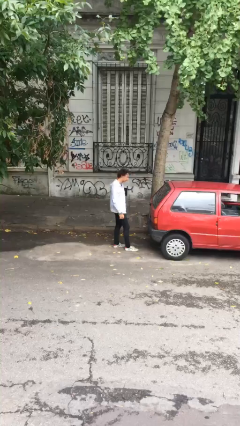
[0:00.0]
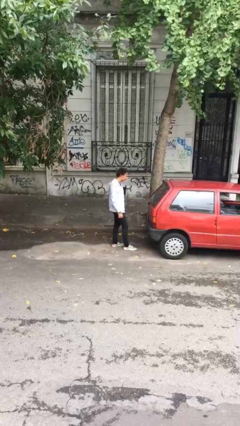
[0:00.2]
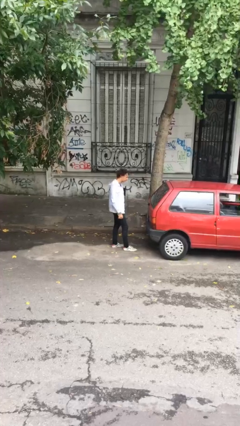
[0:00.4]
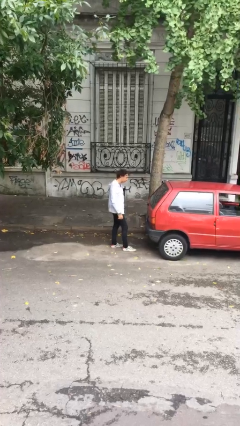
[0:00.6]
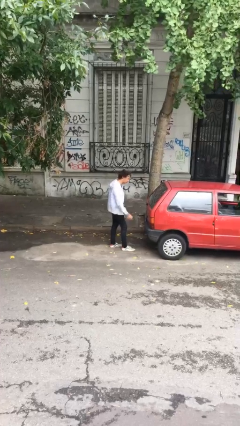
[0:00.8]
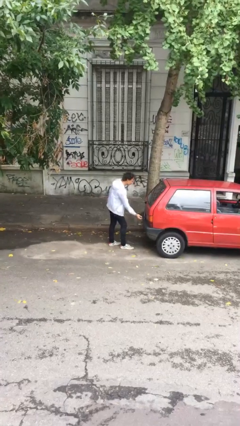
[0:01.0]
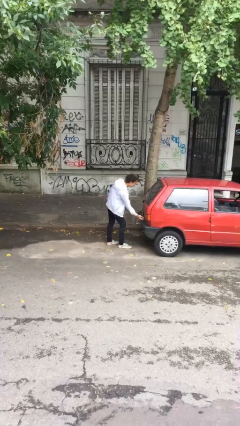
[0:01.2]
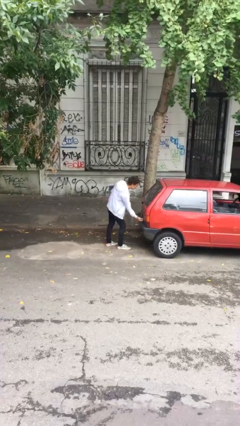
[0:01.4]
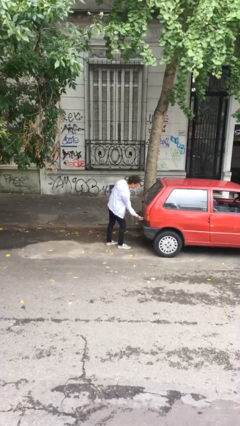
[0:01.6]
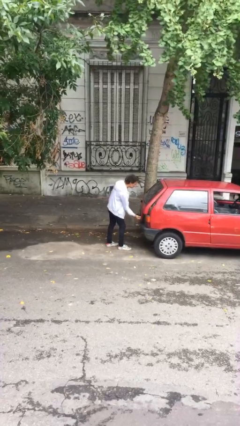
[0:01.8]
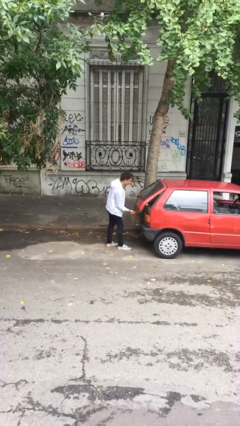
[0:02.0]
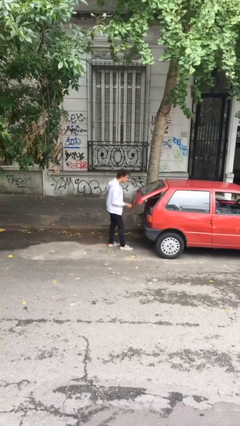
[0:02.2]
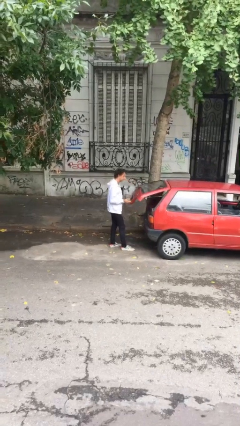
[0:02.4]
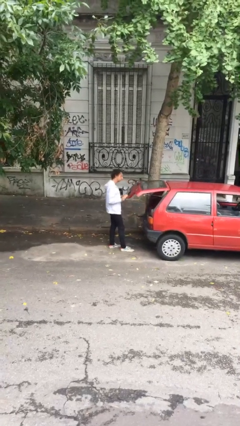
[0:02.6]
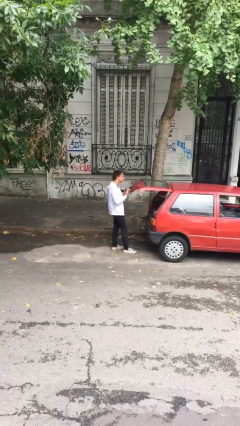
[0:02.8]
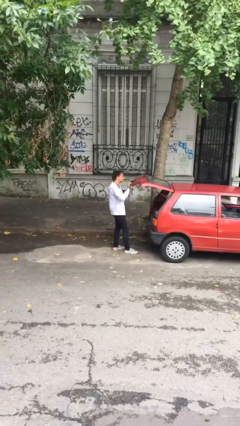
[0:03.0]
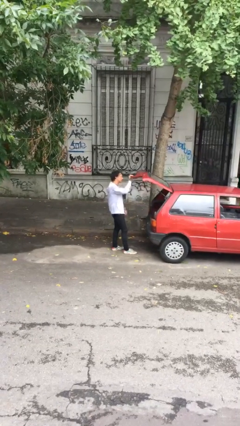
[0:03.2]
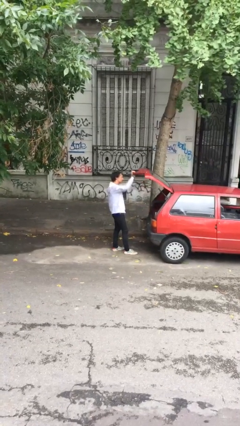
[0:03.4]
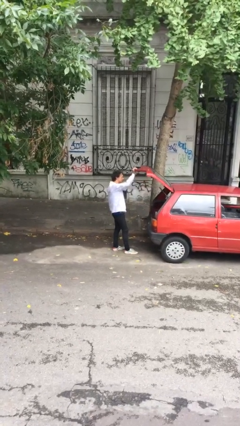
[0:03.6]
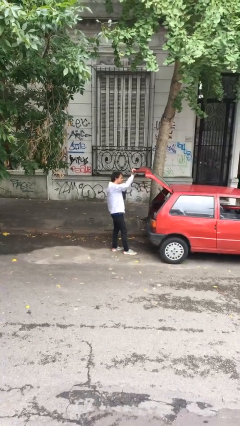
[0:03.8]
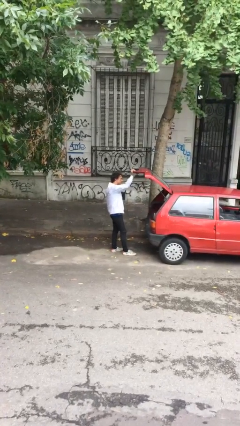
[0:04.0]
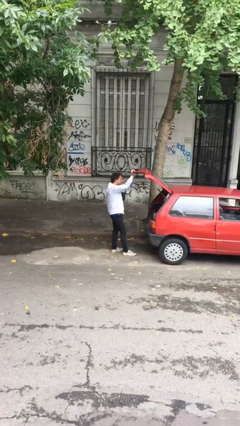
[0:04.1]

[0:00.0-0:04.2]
person opens car trunk

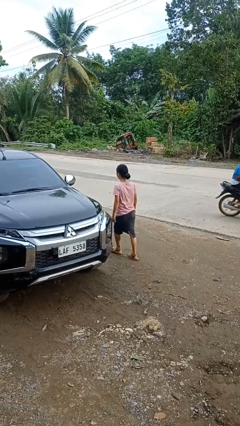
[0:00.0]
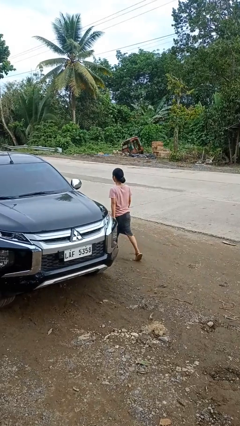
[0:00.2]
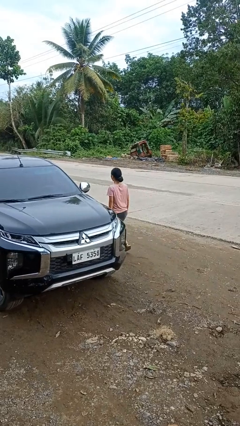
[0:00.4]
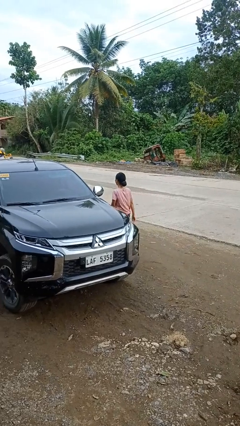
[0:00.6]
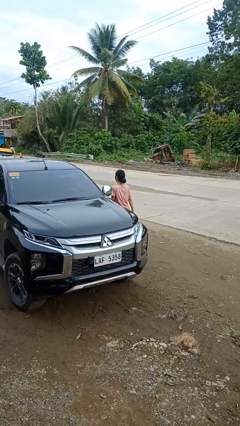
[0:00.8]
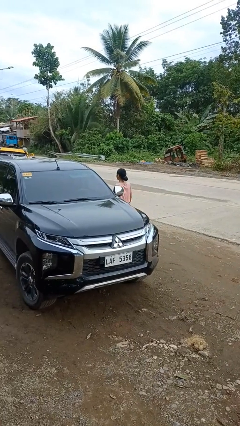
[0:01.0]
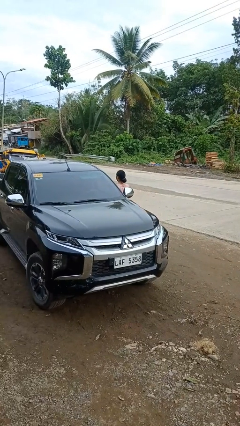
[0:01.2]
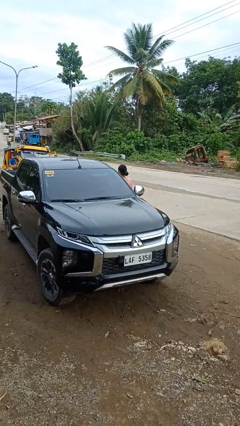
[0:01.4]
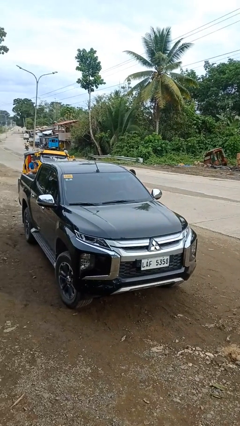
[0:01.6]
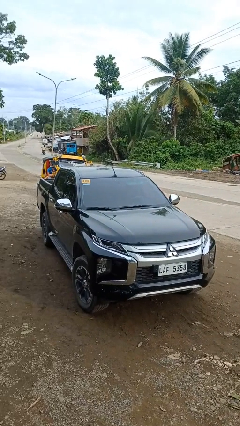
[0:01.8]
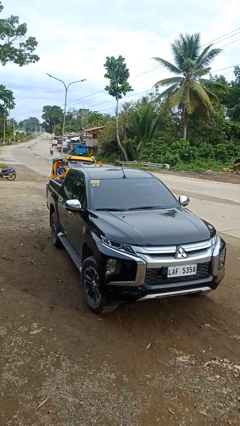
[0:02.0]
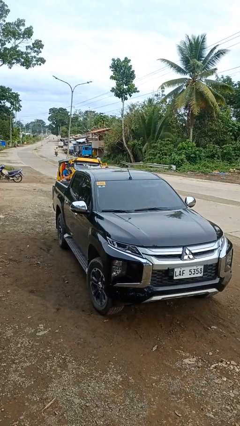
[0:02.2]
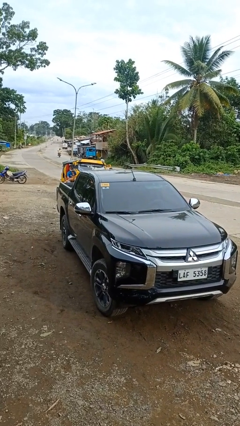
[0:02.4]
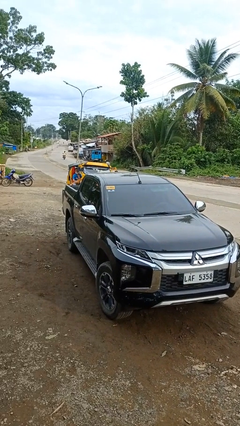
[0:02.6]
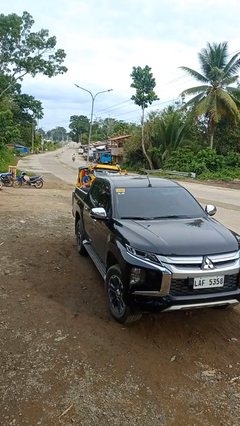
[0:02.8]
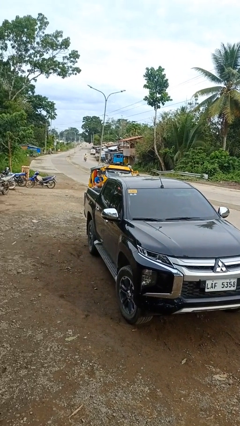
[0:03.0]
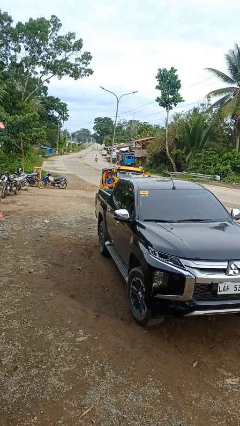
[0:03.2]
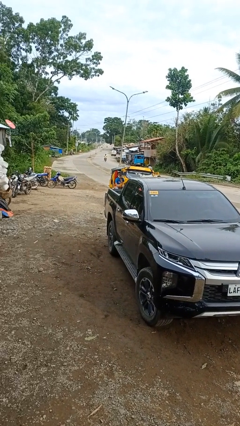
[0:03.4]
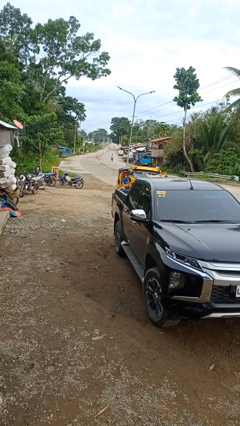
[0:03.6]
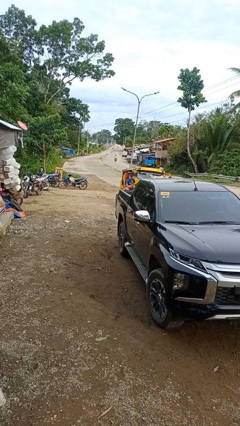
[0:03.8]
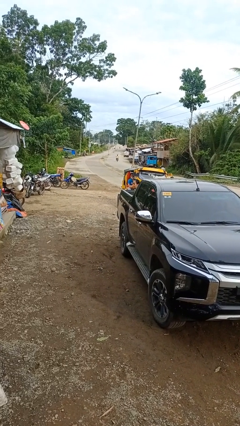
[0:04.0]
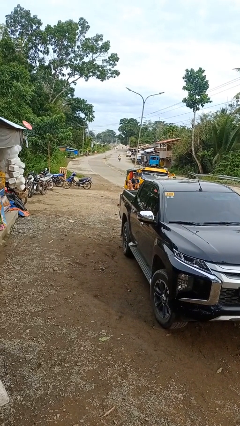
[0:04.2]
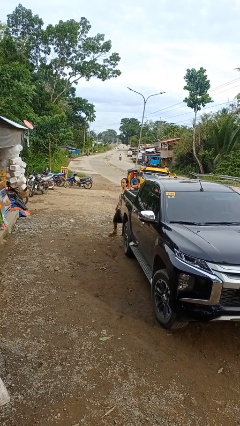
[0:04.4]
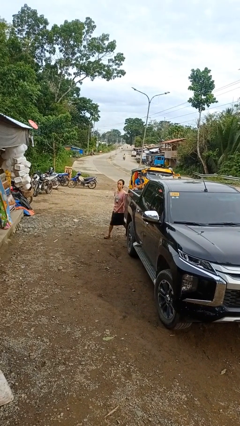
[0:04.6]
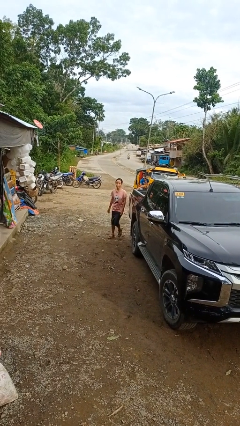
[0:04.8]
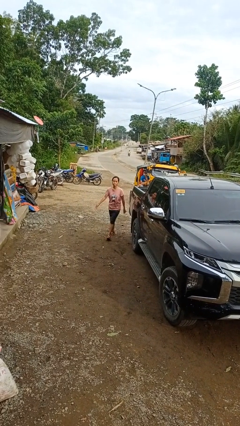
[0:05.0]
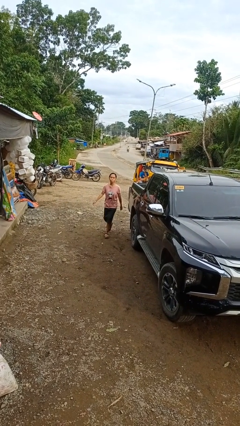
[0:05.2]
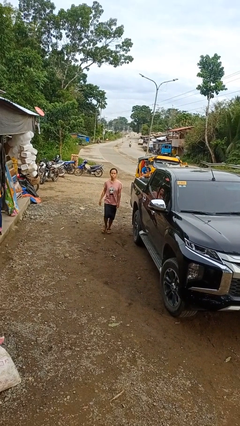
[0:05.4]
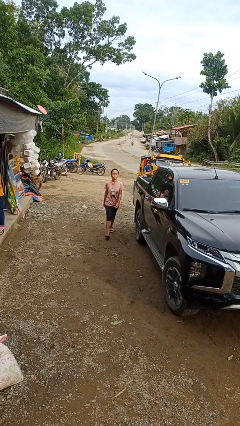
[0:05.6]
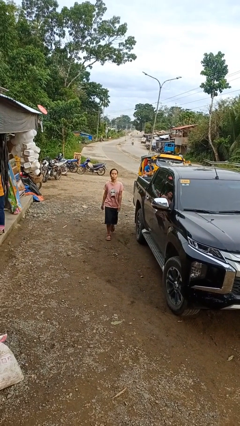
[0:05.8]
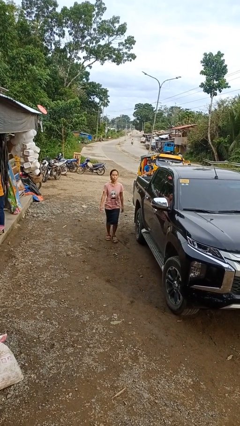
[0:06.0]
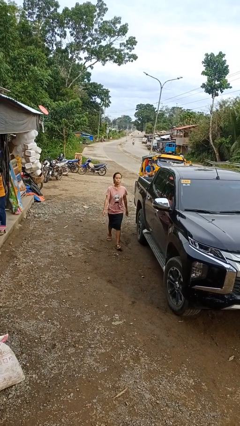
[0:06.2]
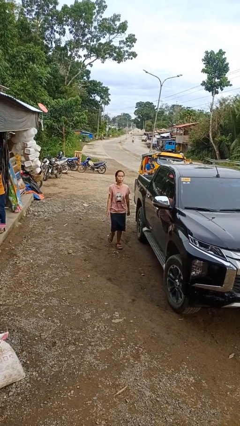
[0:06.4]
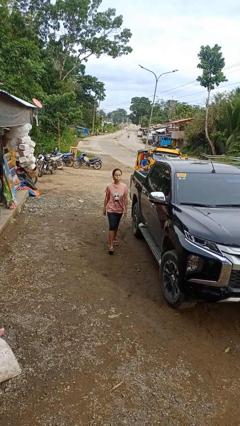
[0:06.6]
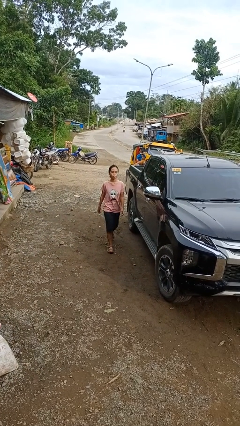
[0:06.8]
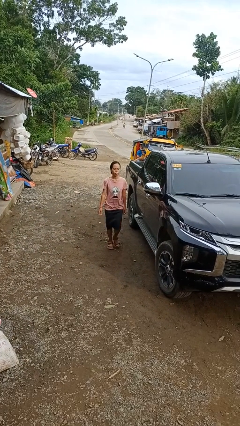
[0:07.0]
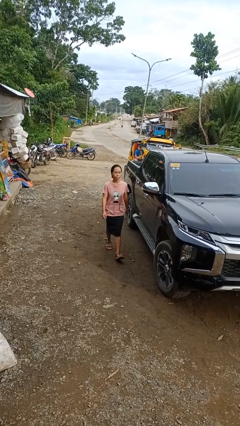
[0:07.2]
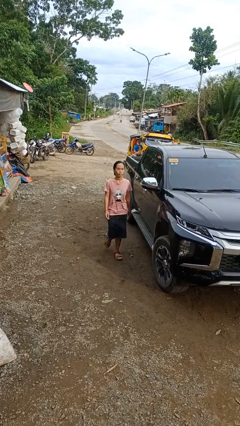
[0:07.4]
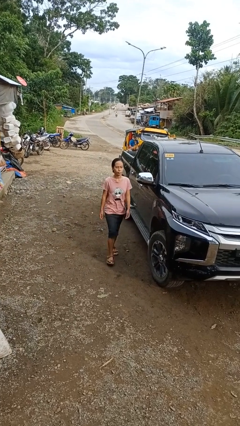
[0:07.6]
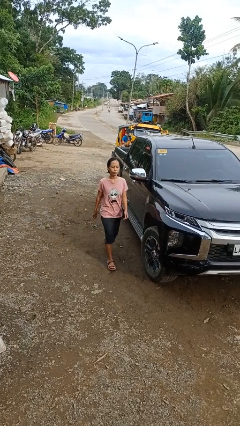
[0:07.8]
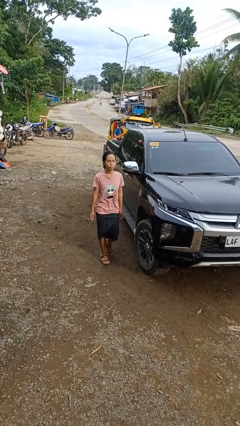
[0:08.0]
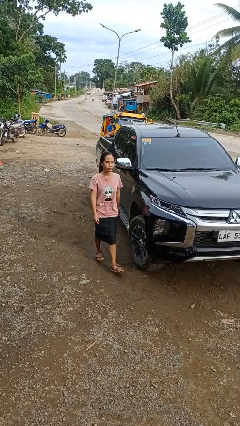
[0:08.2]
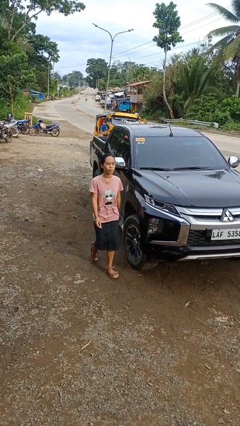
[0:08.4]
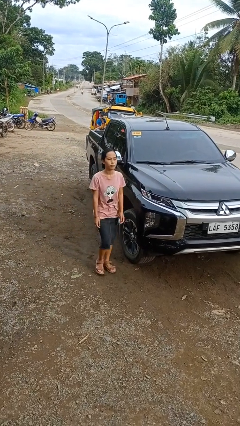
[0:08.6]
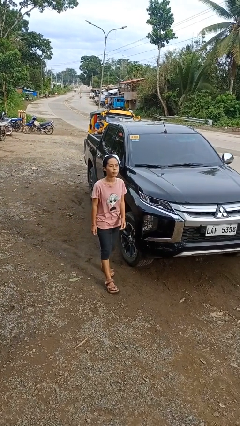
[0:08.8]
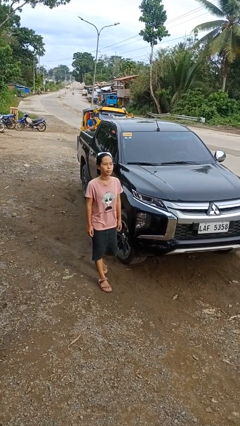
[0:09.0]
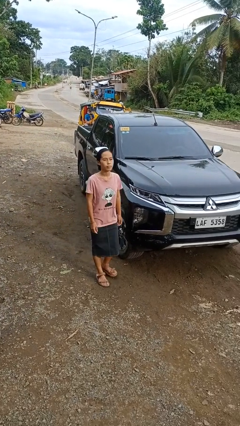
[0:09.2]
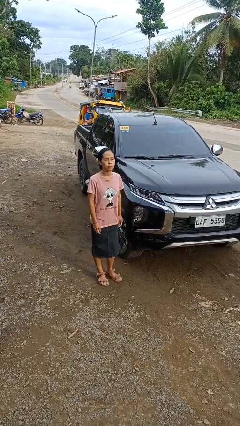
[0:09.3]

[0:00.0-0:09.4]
person walks around car

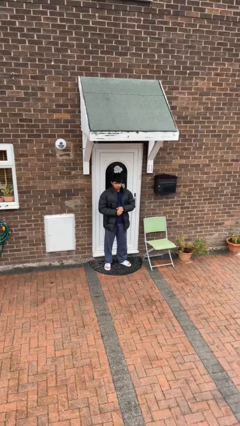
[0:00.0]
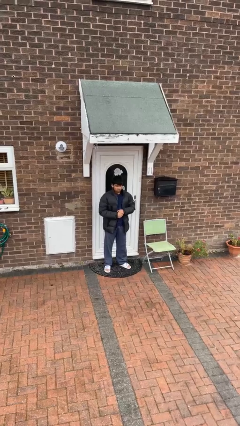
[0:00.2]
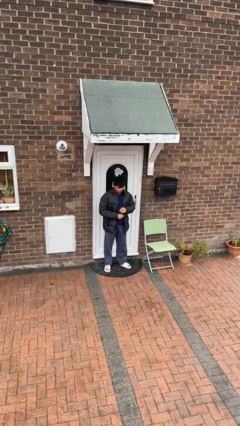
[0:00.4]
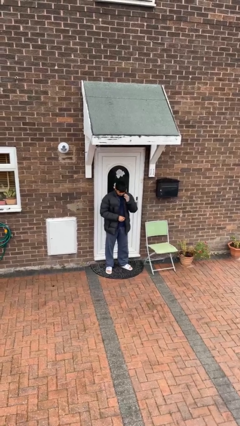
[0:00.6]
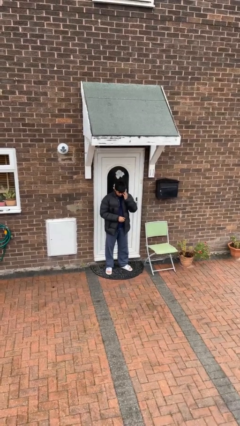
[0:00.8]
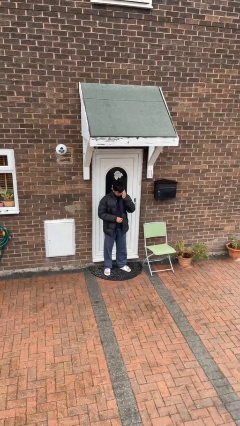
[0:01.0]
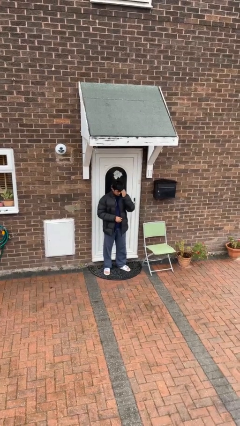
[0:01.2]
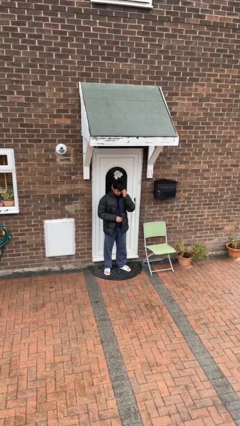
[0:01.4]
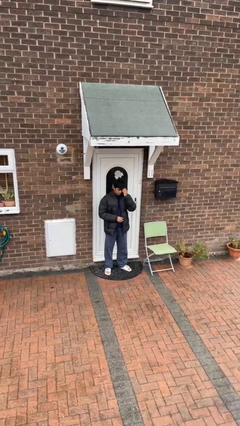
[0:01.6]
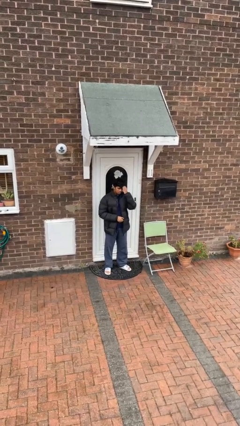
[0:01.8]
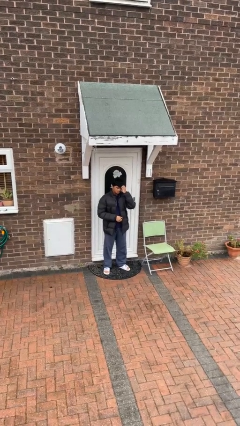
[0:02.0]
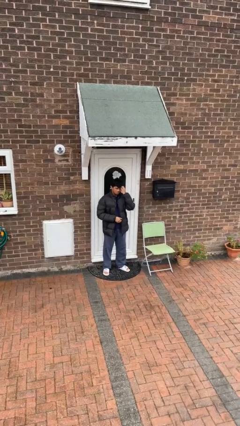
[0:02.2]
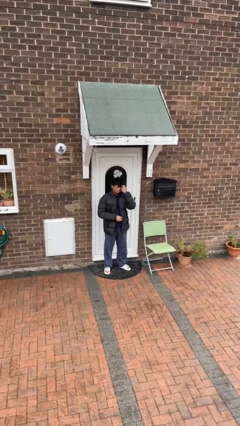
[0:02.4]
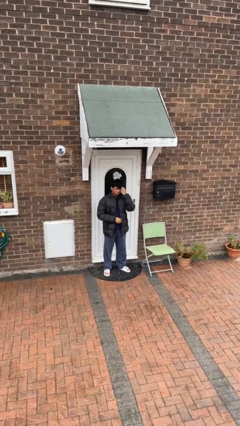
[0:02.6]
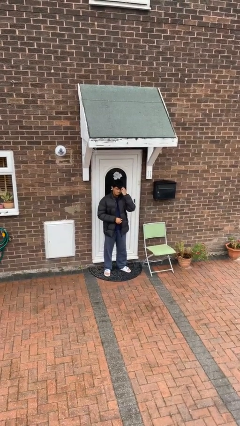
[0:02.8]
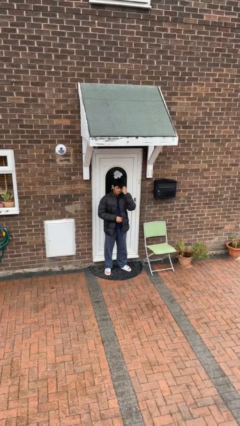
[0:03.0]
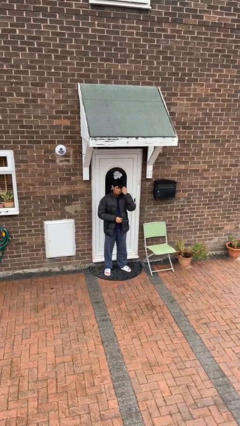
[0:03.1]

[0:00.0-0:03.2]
person scratches face

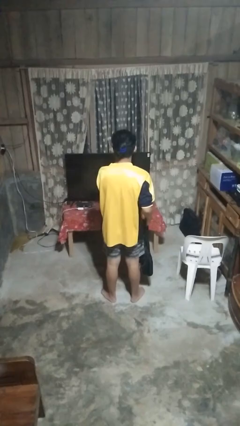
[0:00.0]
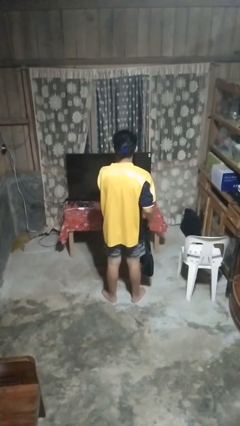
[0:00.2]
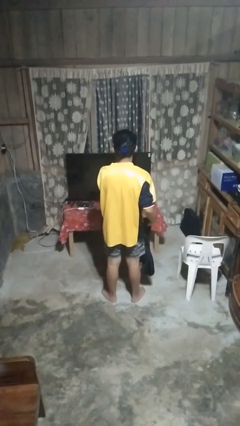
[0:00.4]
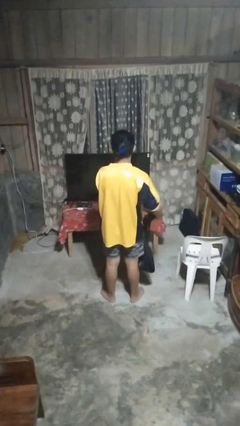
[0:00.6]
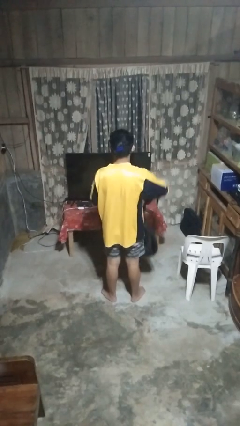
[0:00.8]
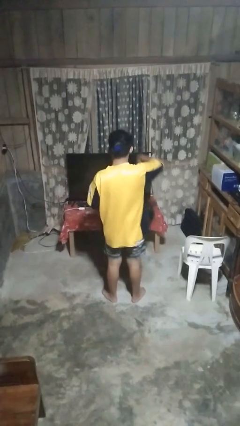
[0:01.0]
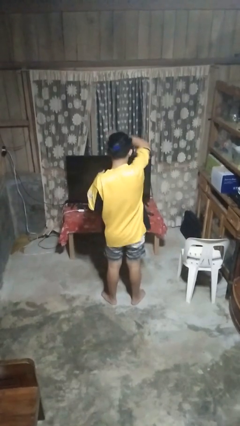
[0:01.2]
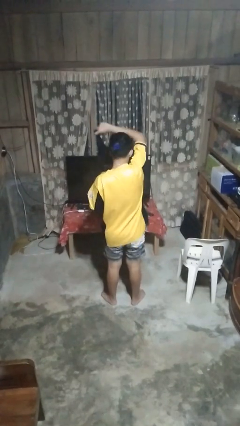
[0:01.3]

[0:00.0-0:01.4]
person puts on backpack
